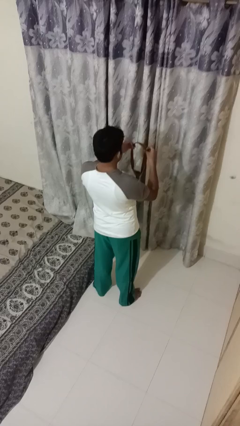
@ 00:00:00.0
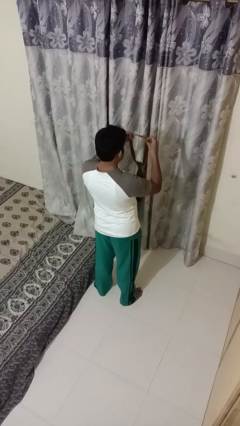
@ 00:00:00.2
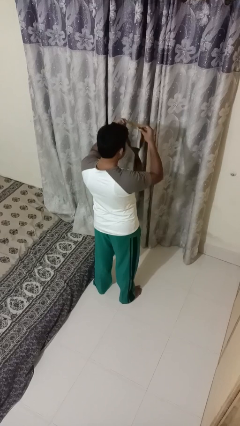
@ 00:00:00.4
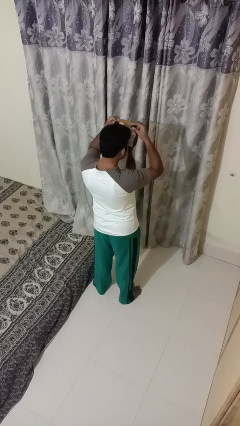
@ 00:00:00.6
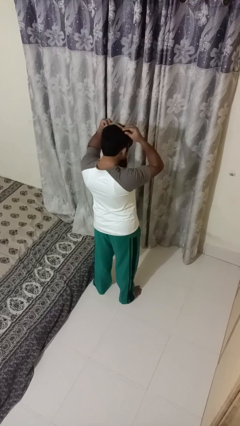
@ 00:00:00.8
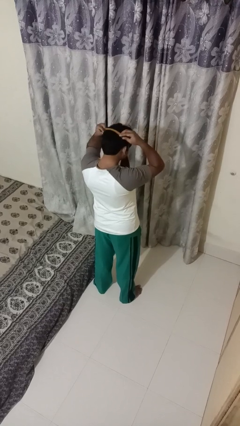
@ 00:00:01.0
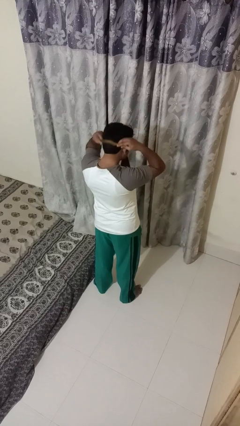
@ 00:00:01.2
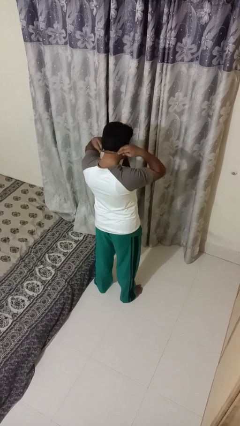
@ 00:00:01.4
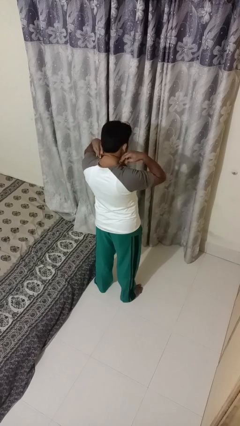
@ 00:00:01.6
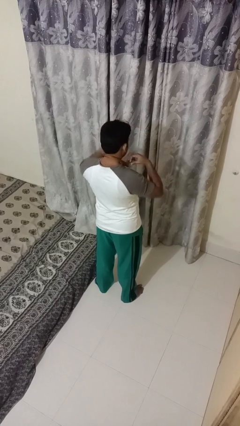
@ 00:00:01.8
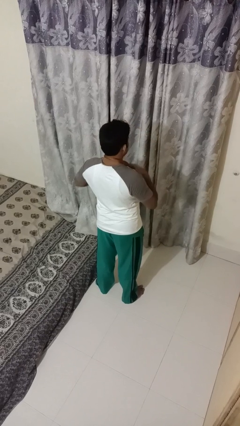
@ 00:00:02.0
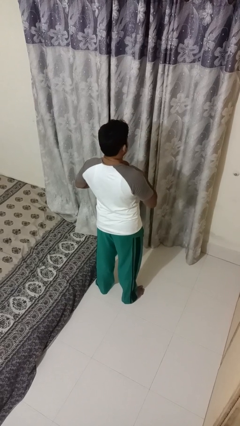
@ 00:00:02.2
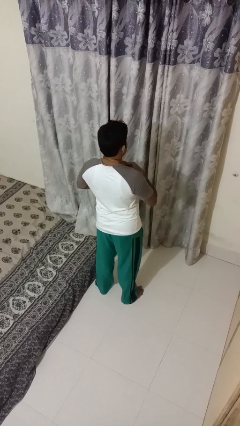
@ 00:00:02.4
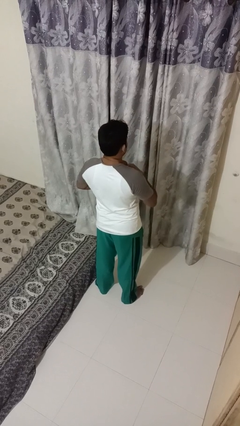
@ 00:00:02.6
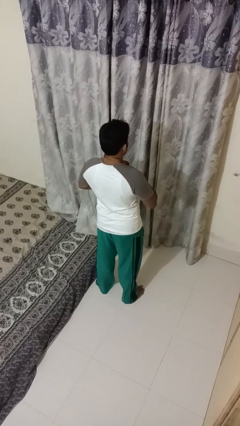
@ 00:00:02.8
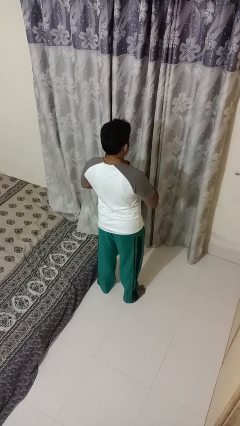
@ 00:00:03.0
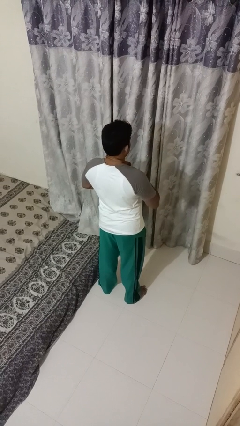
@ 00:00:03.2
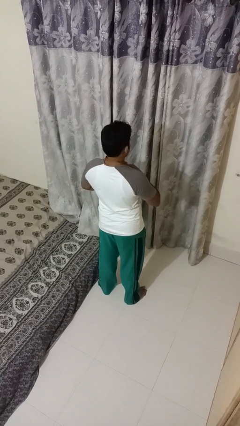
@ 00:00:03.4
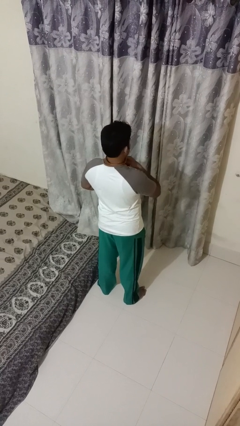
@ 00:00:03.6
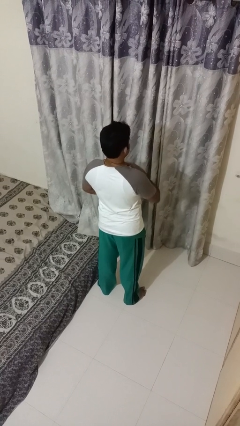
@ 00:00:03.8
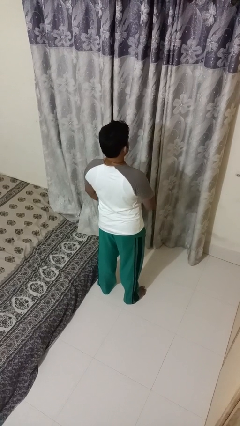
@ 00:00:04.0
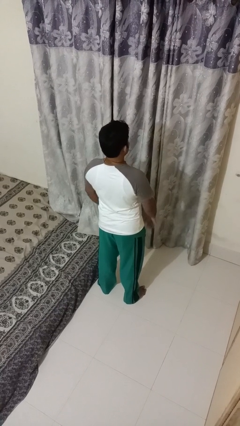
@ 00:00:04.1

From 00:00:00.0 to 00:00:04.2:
person puts on necktie

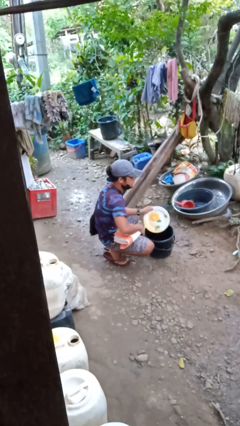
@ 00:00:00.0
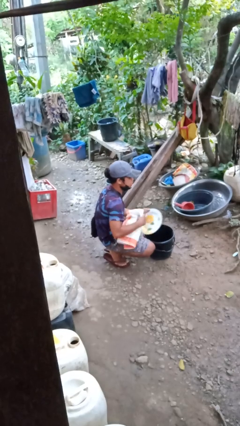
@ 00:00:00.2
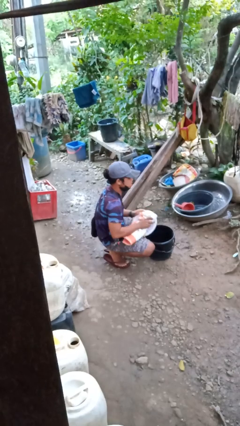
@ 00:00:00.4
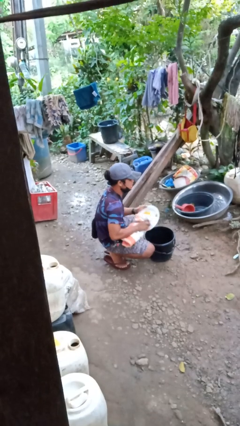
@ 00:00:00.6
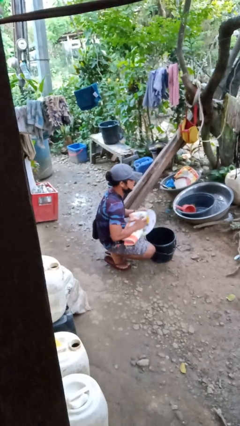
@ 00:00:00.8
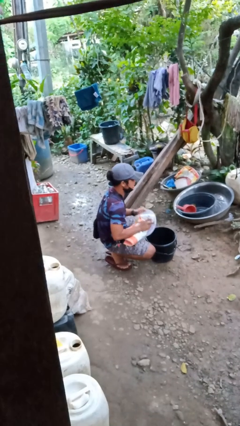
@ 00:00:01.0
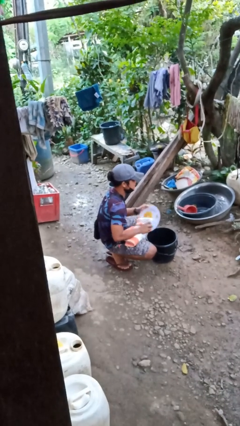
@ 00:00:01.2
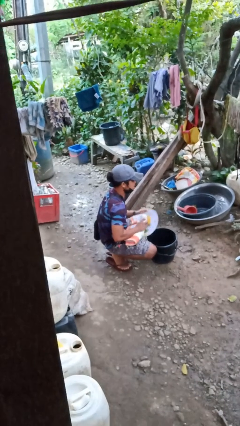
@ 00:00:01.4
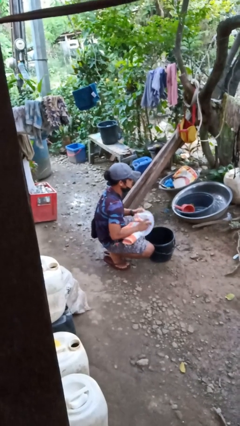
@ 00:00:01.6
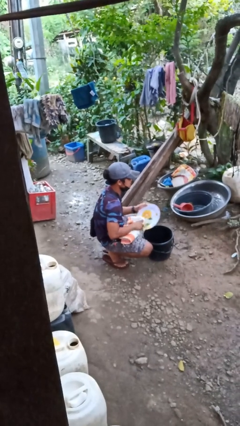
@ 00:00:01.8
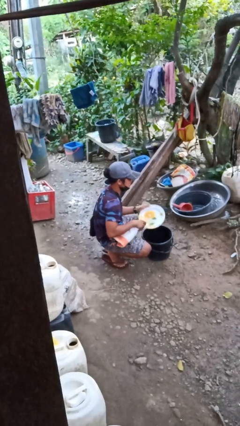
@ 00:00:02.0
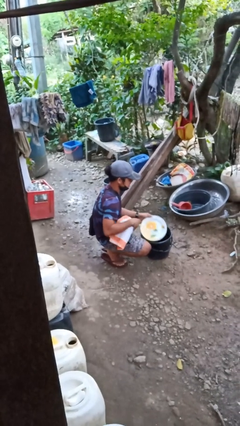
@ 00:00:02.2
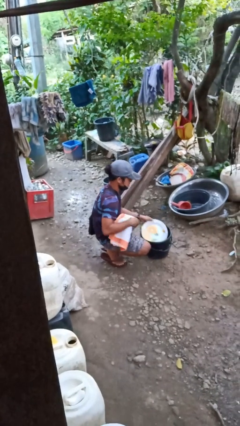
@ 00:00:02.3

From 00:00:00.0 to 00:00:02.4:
person dries dish

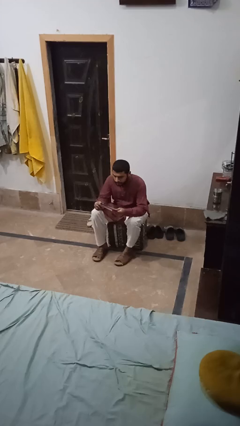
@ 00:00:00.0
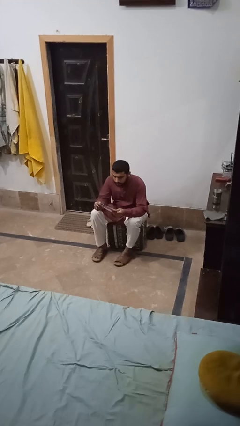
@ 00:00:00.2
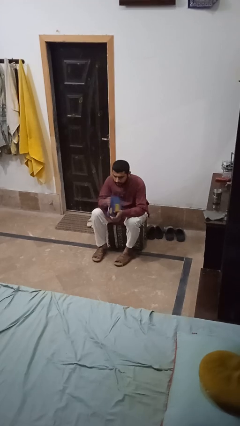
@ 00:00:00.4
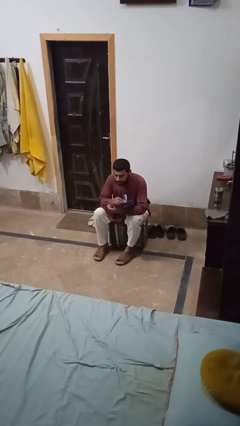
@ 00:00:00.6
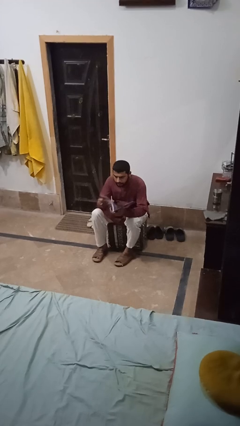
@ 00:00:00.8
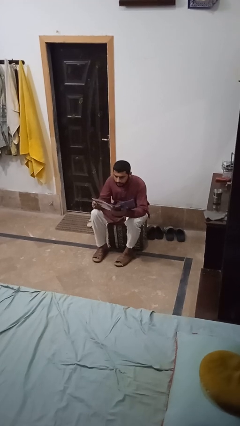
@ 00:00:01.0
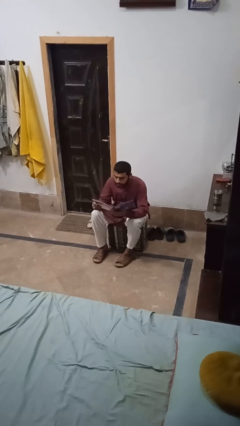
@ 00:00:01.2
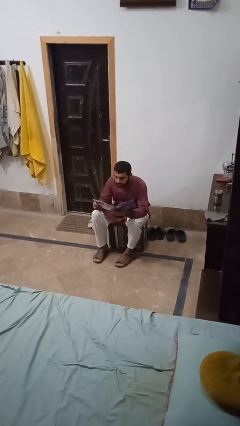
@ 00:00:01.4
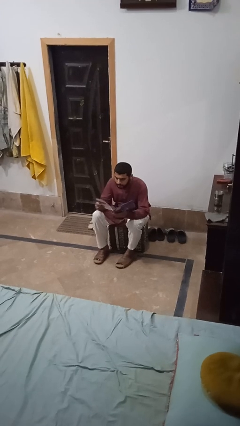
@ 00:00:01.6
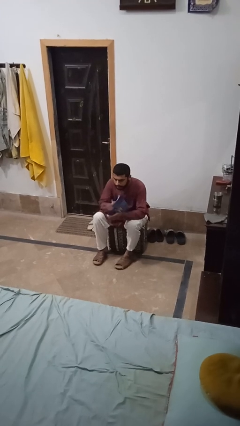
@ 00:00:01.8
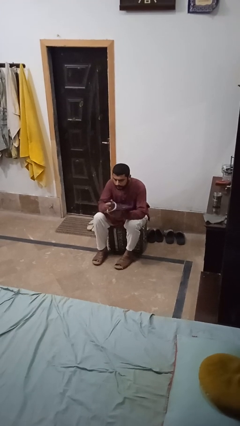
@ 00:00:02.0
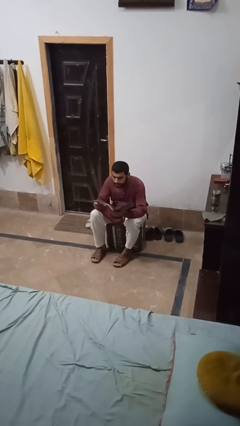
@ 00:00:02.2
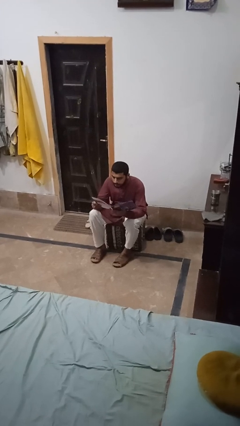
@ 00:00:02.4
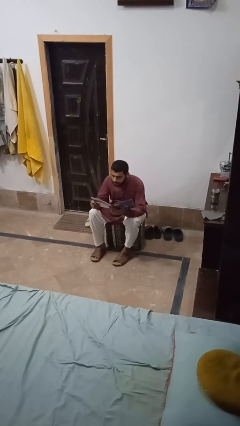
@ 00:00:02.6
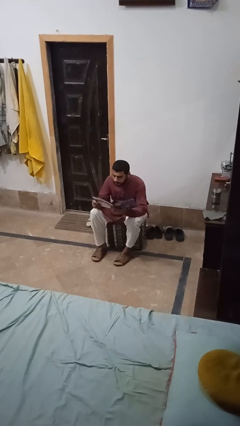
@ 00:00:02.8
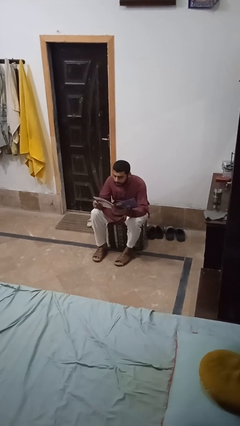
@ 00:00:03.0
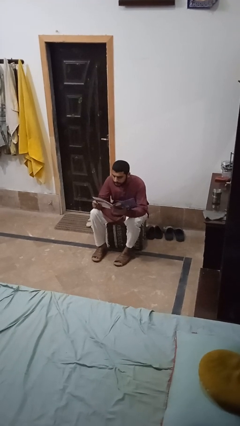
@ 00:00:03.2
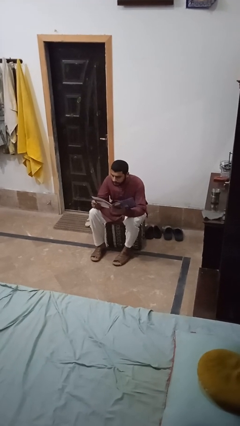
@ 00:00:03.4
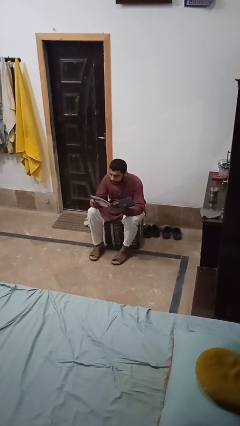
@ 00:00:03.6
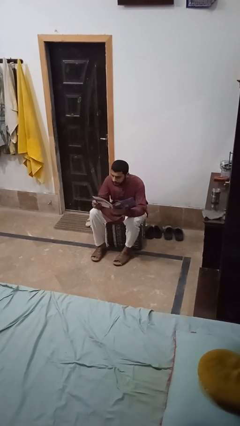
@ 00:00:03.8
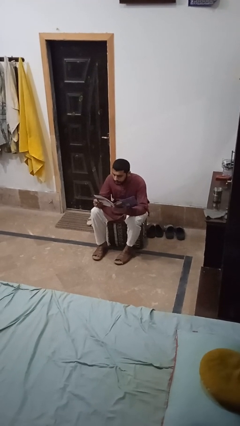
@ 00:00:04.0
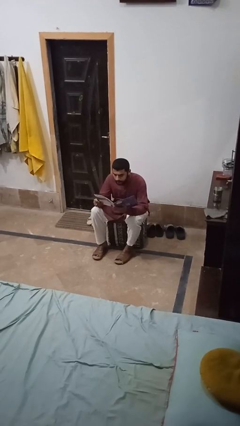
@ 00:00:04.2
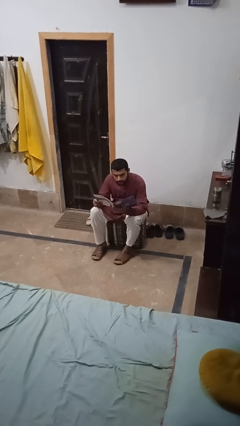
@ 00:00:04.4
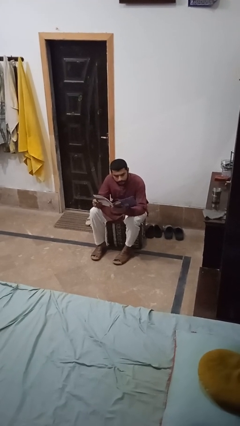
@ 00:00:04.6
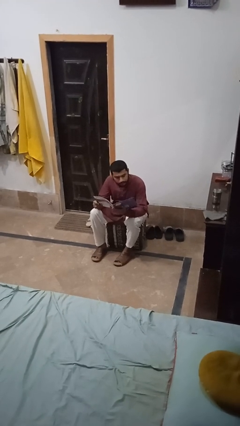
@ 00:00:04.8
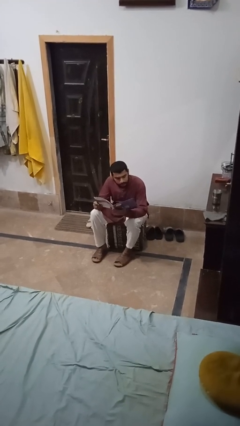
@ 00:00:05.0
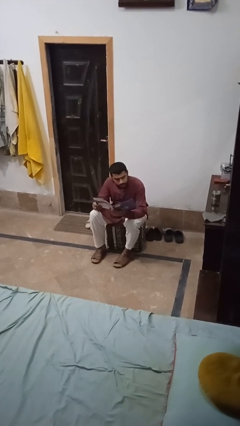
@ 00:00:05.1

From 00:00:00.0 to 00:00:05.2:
person reads magazine

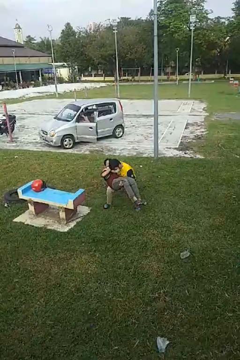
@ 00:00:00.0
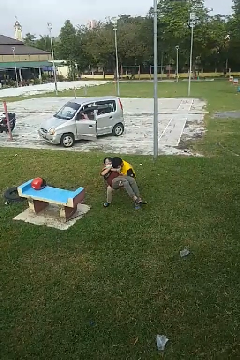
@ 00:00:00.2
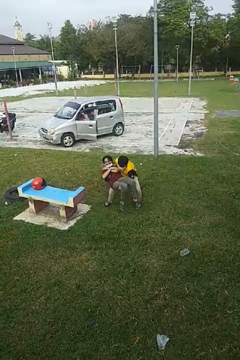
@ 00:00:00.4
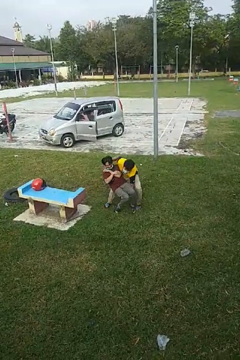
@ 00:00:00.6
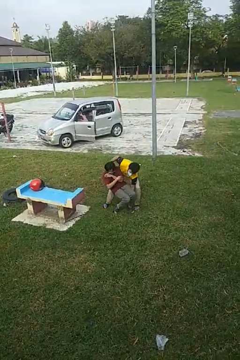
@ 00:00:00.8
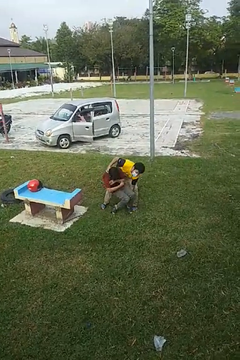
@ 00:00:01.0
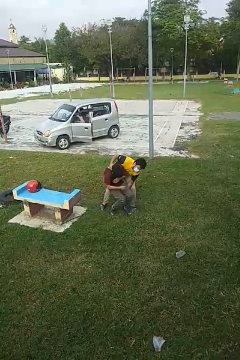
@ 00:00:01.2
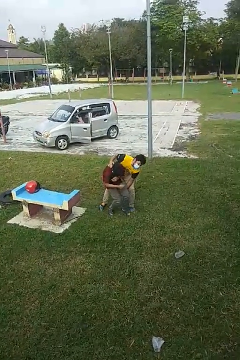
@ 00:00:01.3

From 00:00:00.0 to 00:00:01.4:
person puts down person

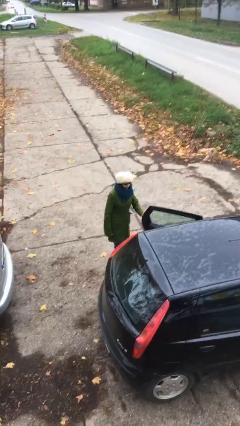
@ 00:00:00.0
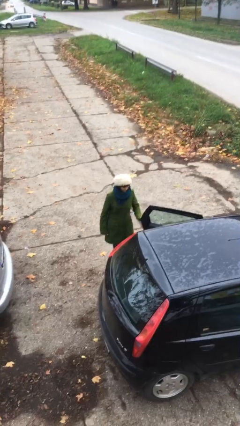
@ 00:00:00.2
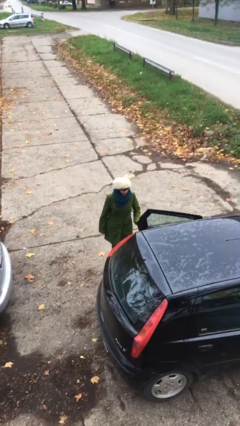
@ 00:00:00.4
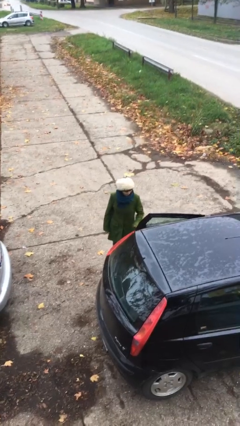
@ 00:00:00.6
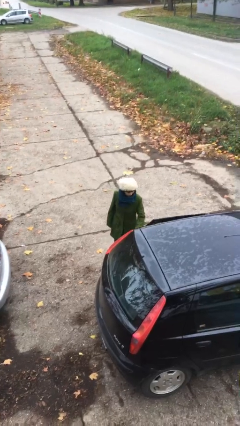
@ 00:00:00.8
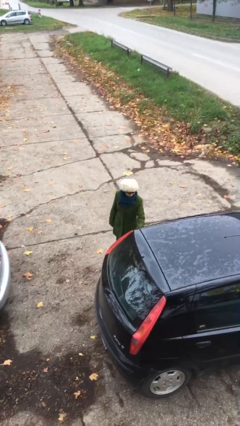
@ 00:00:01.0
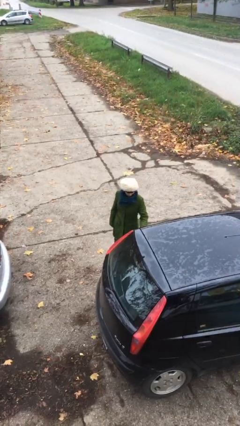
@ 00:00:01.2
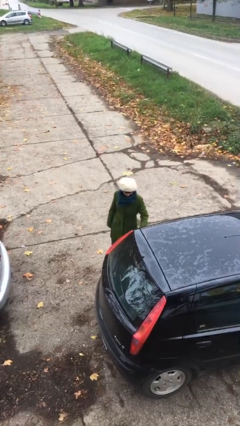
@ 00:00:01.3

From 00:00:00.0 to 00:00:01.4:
person closes car door

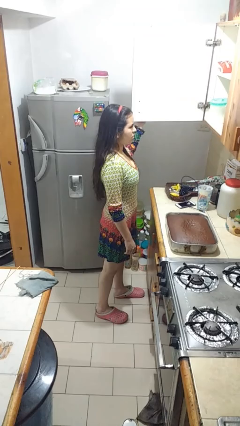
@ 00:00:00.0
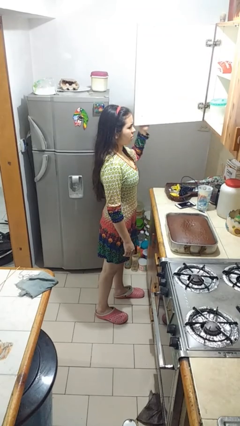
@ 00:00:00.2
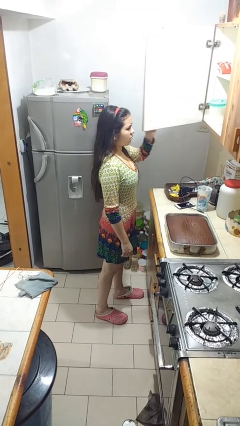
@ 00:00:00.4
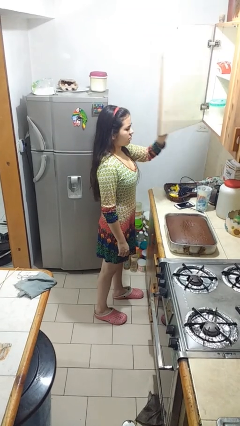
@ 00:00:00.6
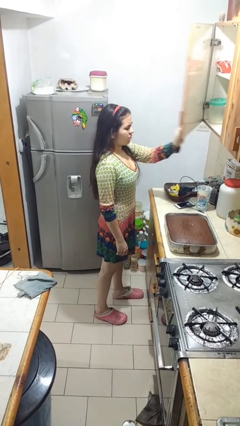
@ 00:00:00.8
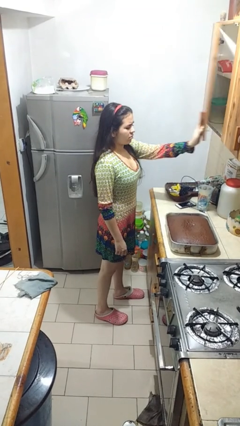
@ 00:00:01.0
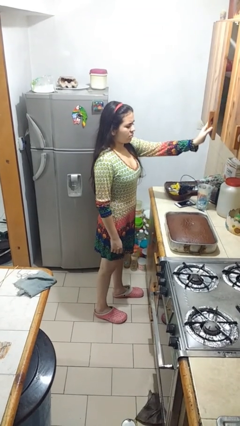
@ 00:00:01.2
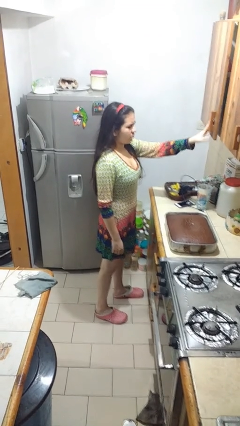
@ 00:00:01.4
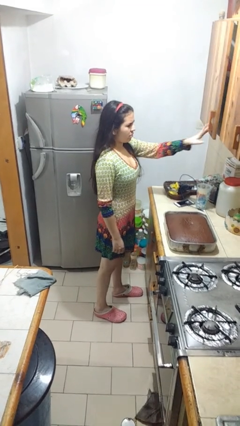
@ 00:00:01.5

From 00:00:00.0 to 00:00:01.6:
person closes cabinet

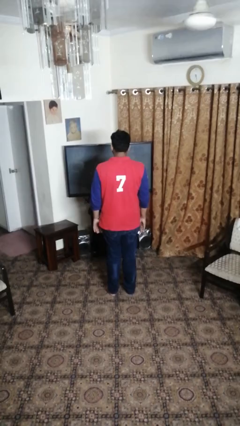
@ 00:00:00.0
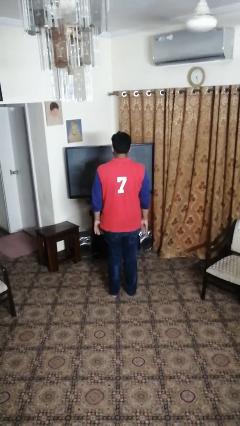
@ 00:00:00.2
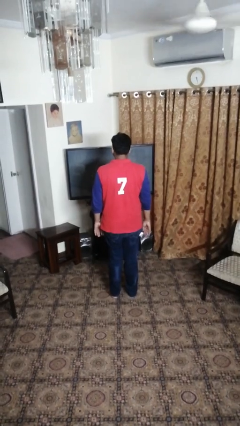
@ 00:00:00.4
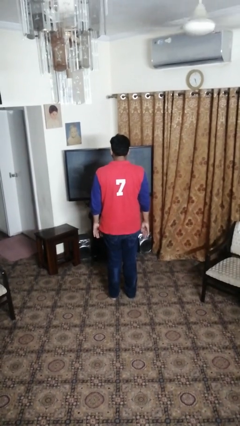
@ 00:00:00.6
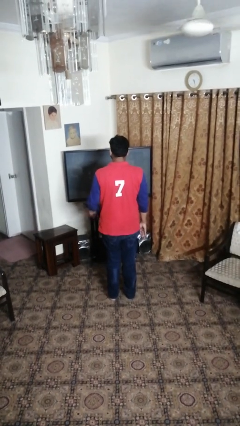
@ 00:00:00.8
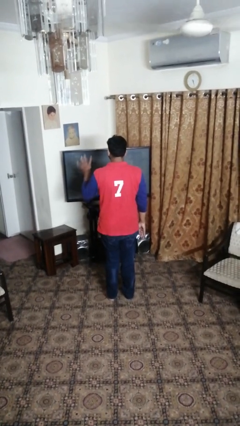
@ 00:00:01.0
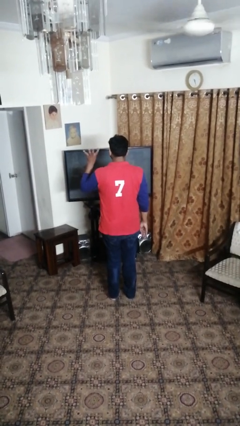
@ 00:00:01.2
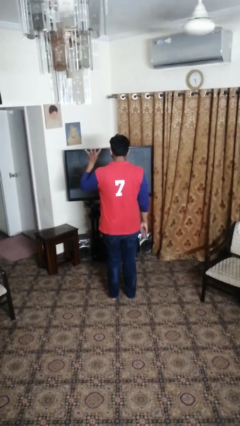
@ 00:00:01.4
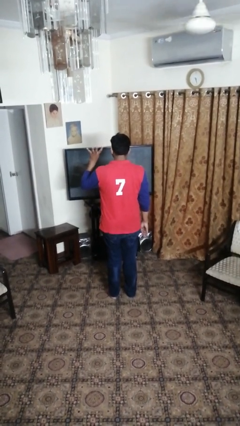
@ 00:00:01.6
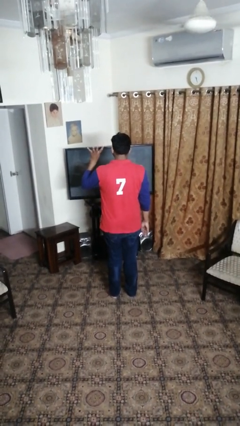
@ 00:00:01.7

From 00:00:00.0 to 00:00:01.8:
person gestures number four
